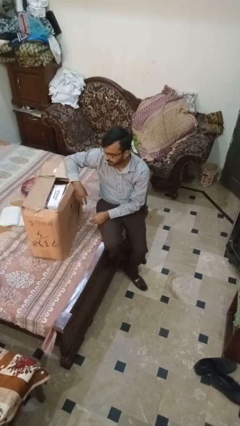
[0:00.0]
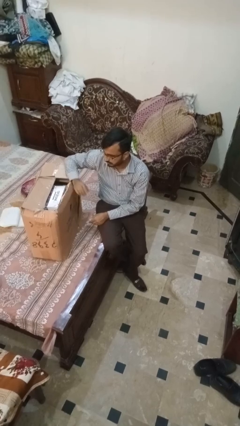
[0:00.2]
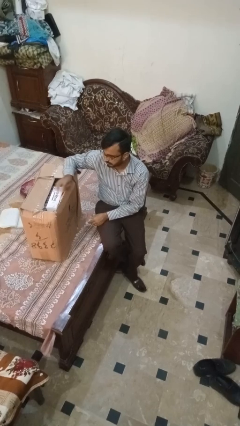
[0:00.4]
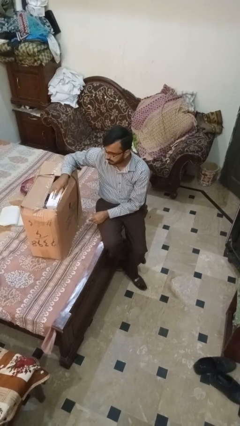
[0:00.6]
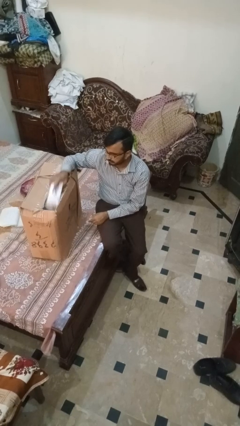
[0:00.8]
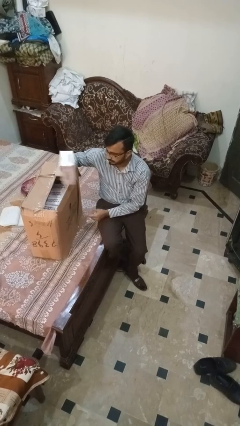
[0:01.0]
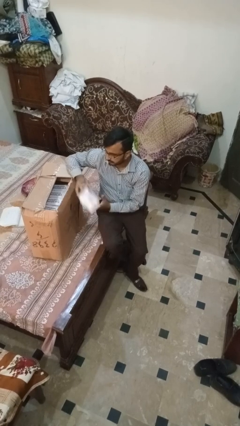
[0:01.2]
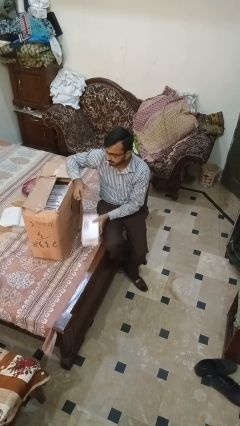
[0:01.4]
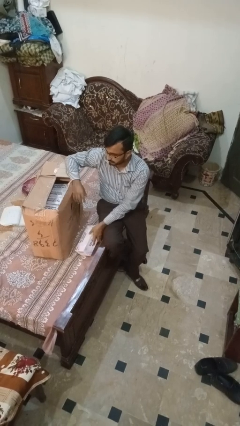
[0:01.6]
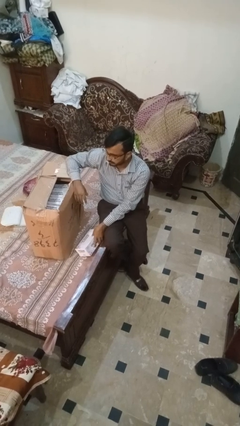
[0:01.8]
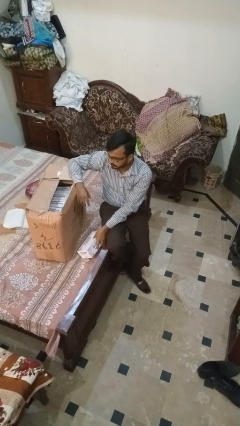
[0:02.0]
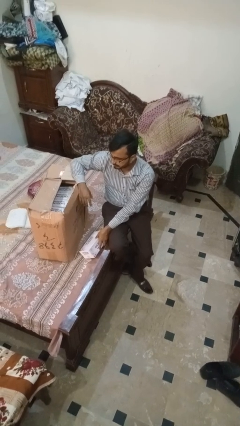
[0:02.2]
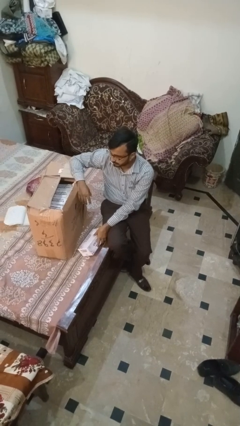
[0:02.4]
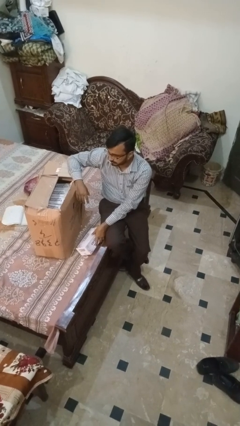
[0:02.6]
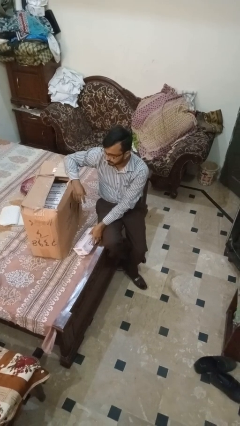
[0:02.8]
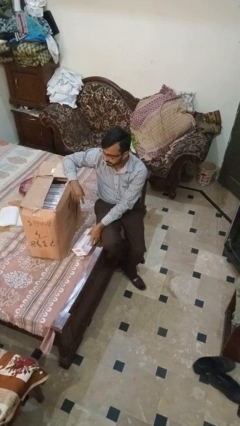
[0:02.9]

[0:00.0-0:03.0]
person takes object from box

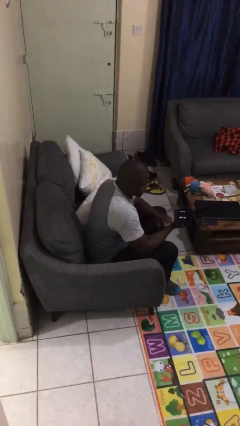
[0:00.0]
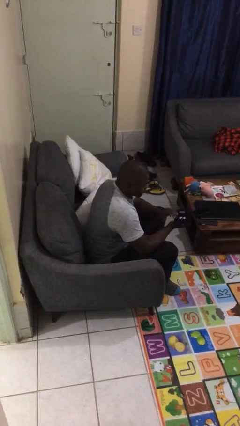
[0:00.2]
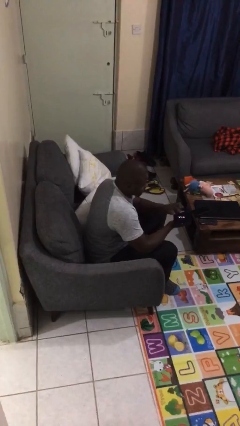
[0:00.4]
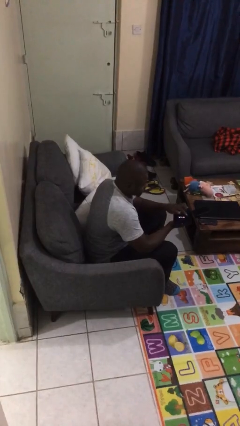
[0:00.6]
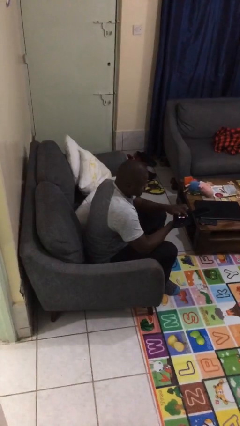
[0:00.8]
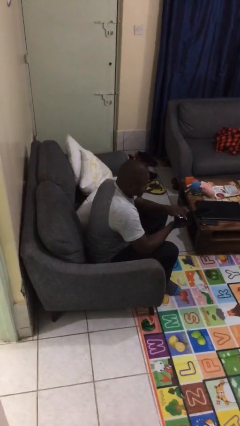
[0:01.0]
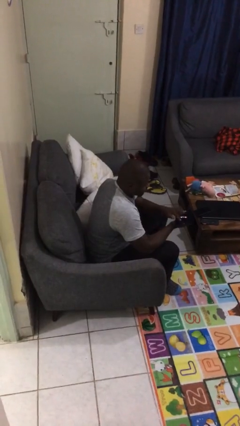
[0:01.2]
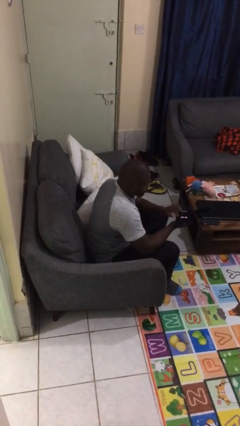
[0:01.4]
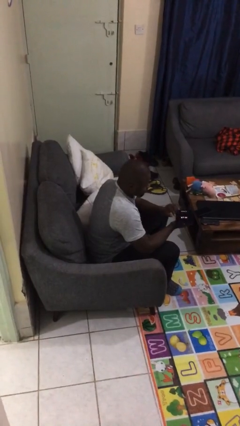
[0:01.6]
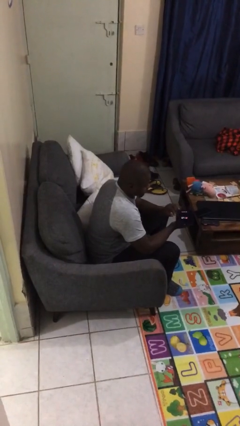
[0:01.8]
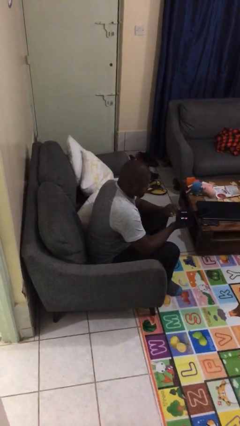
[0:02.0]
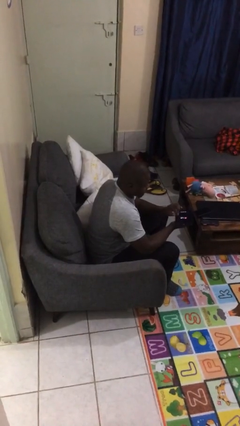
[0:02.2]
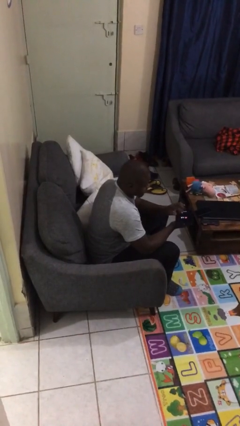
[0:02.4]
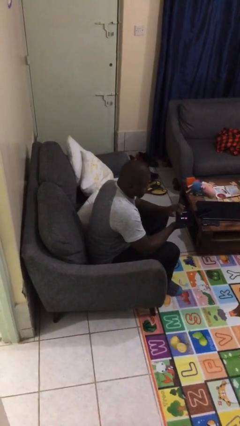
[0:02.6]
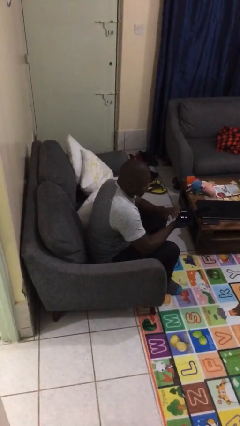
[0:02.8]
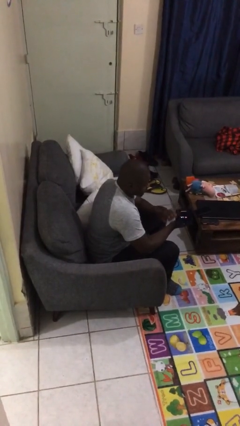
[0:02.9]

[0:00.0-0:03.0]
person interacts with tablet

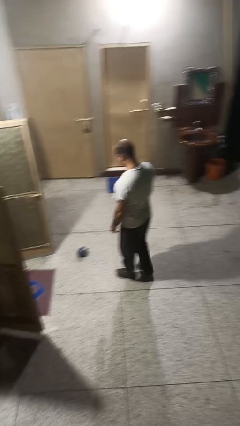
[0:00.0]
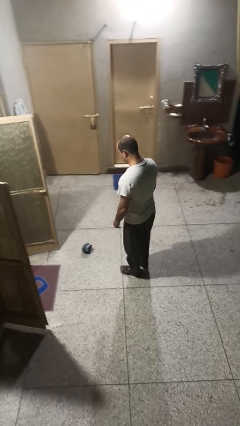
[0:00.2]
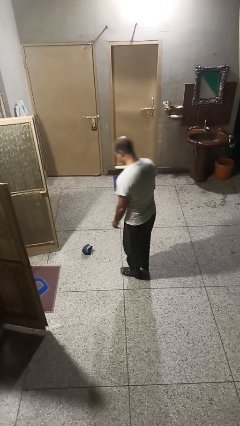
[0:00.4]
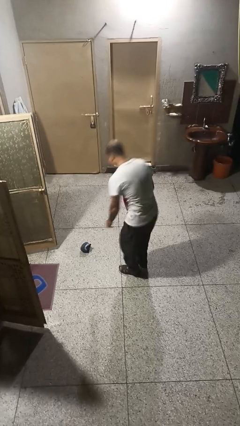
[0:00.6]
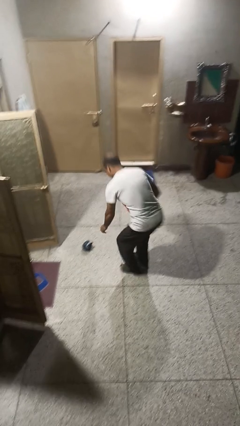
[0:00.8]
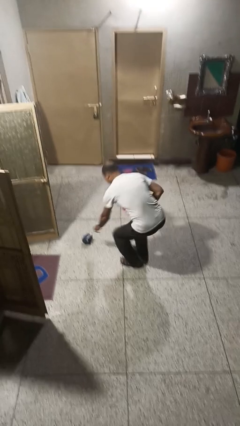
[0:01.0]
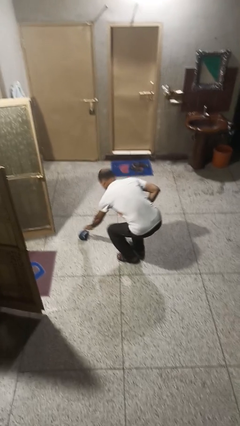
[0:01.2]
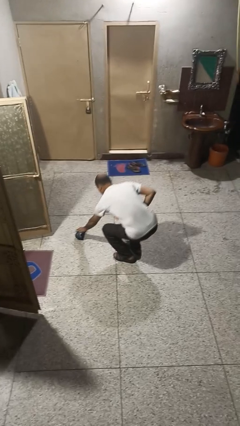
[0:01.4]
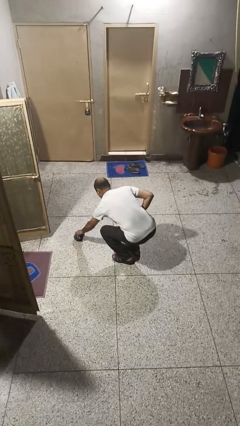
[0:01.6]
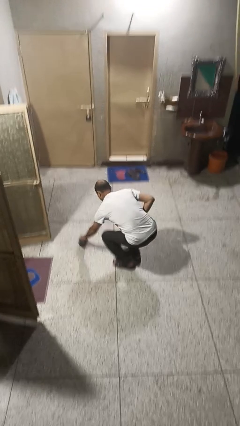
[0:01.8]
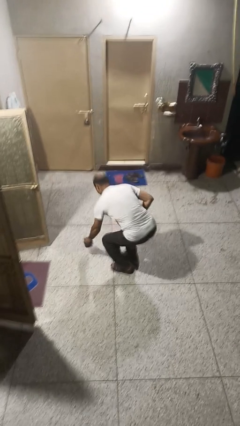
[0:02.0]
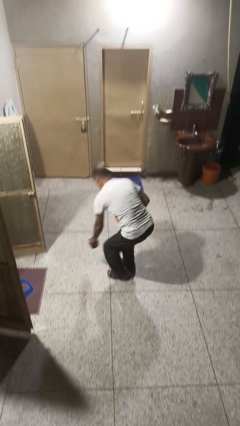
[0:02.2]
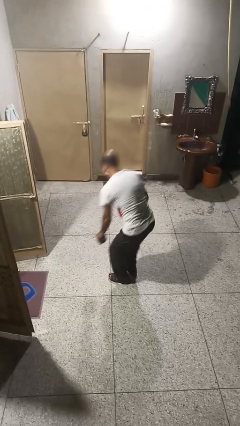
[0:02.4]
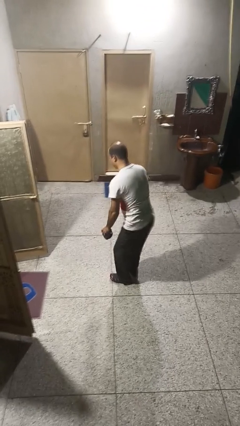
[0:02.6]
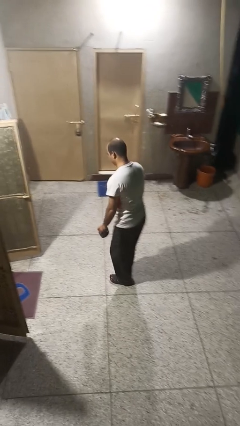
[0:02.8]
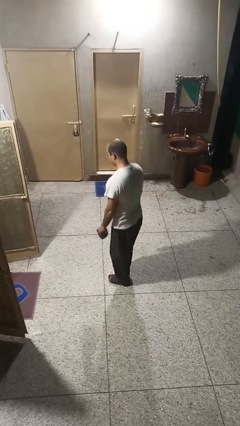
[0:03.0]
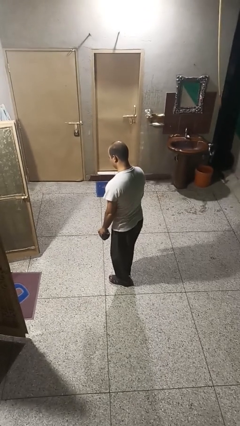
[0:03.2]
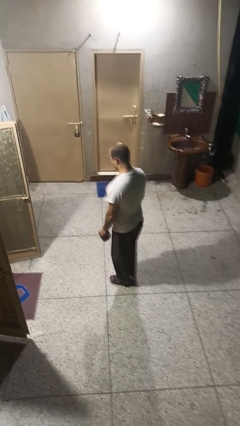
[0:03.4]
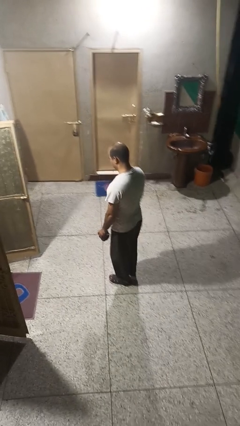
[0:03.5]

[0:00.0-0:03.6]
person picks up object from floor

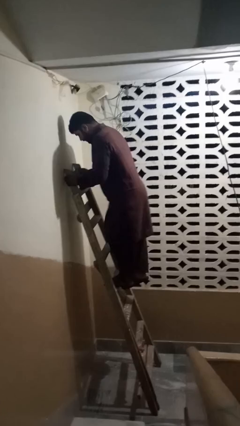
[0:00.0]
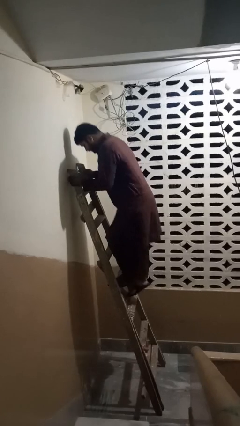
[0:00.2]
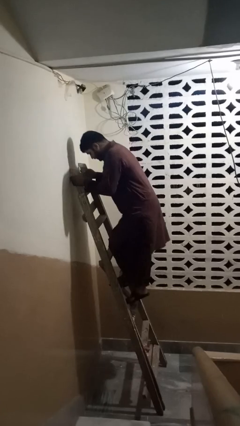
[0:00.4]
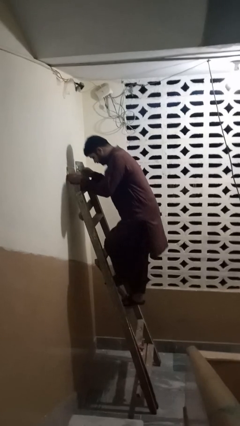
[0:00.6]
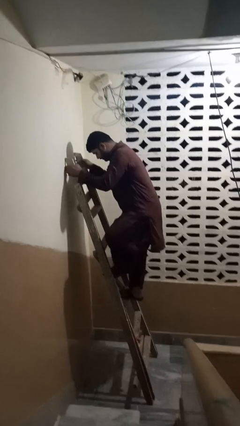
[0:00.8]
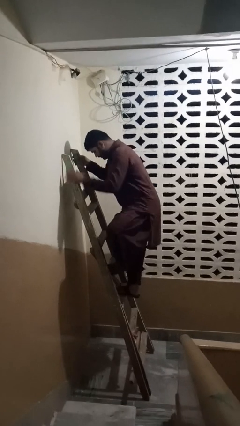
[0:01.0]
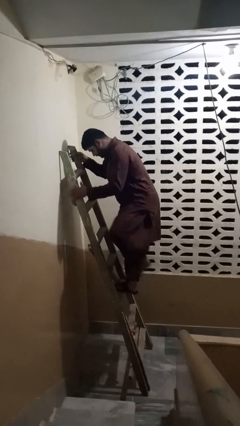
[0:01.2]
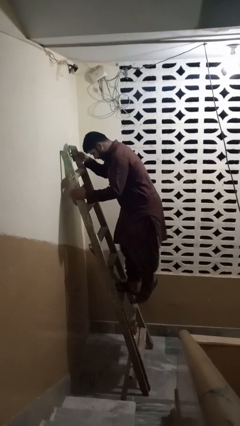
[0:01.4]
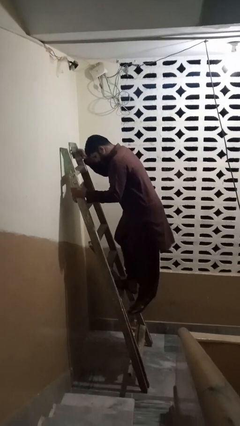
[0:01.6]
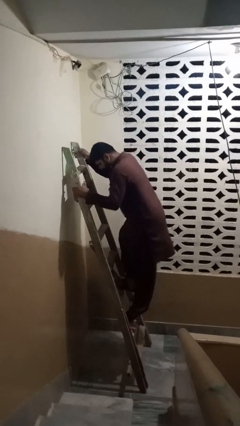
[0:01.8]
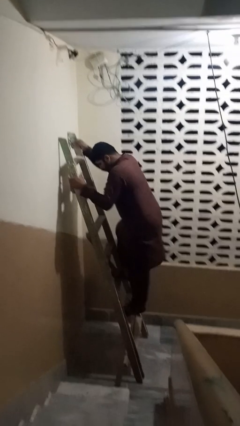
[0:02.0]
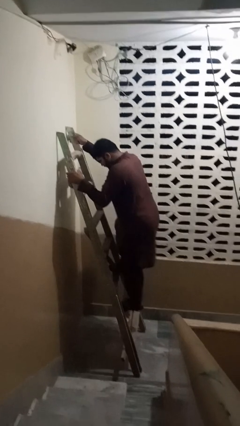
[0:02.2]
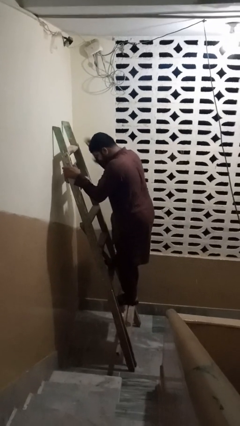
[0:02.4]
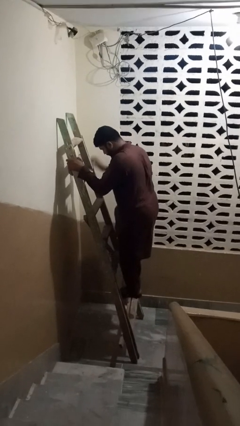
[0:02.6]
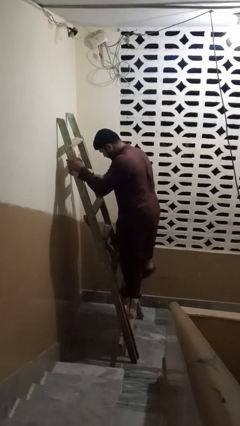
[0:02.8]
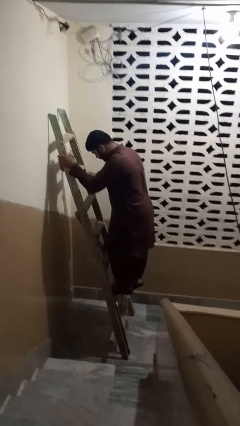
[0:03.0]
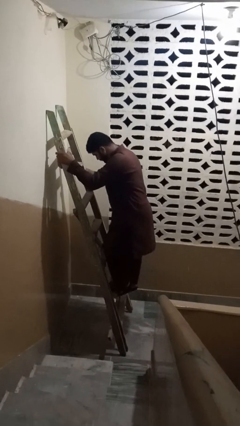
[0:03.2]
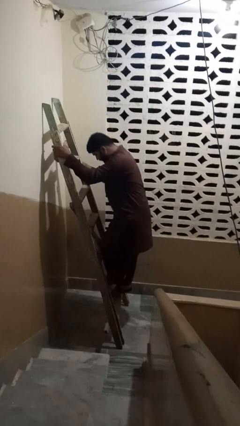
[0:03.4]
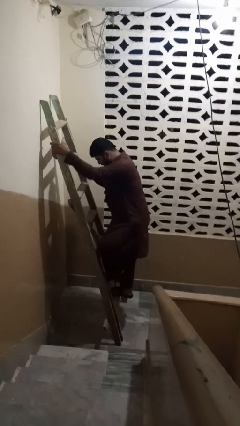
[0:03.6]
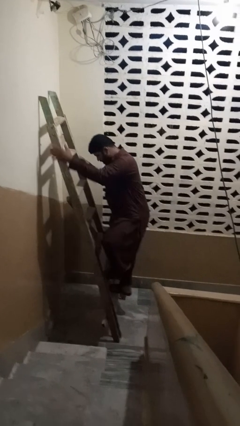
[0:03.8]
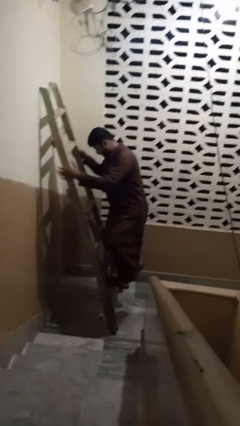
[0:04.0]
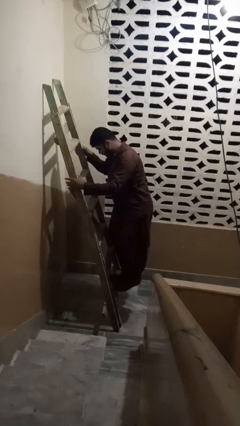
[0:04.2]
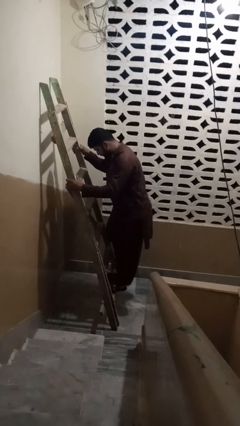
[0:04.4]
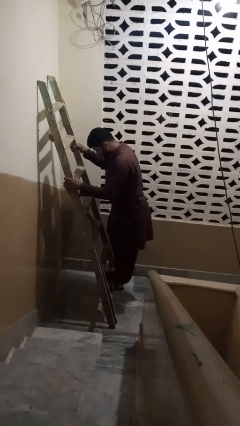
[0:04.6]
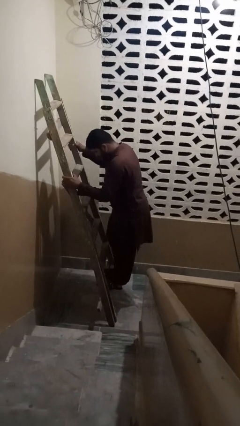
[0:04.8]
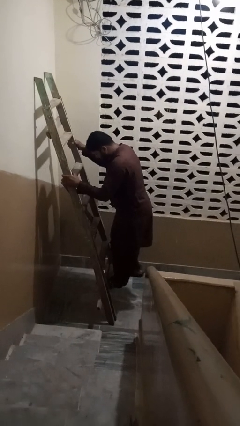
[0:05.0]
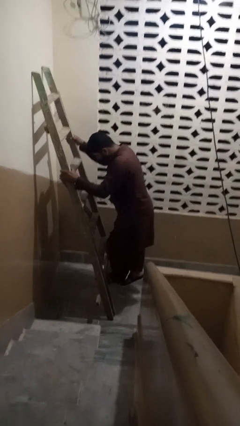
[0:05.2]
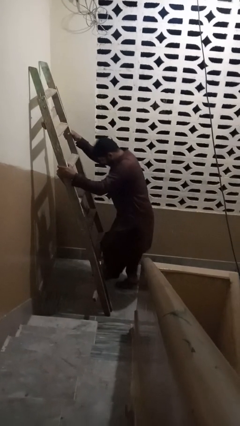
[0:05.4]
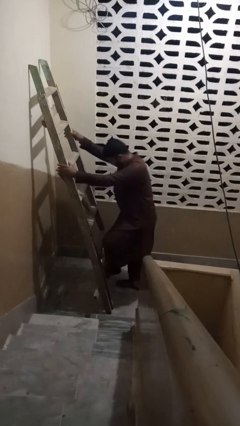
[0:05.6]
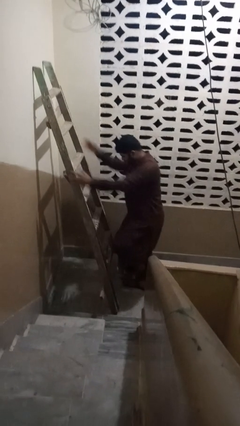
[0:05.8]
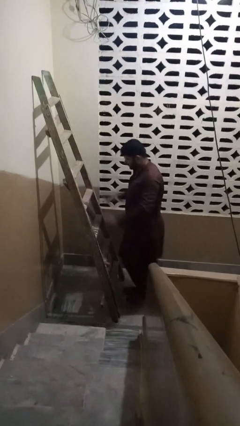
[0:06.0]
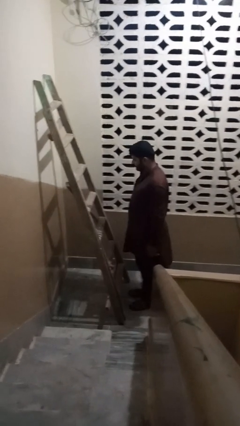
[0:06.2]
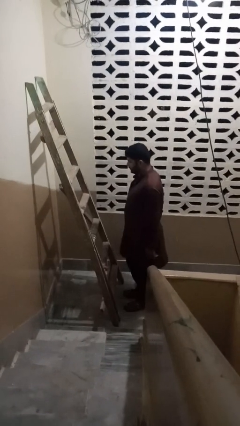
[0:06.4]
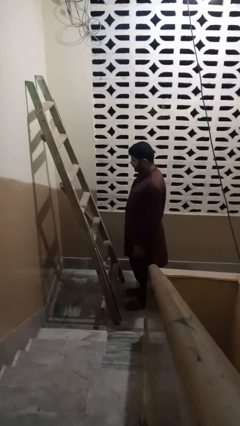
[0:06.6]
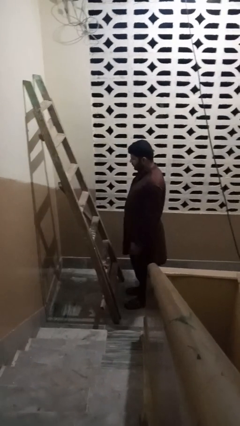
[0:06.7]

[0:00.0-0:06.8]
person climbs down ladder

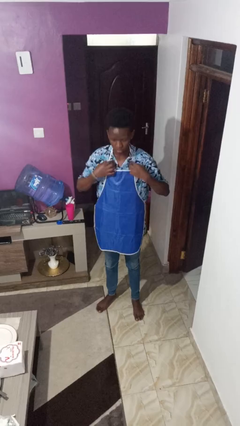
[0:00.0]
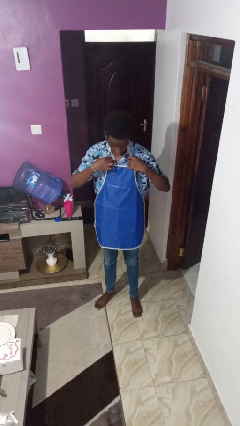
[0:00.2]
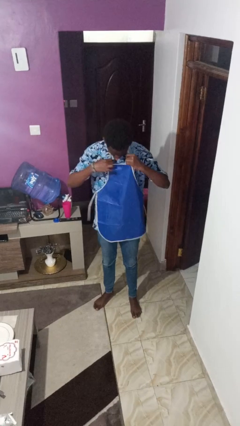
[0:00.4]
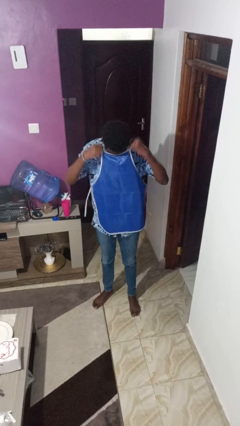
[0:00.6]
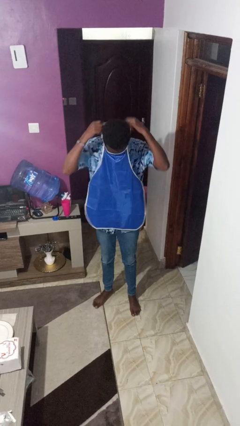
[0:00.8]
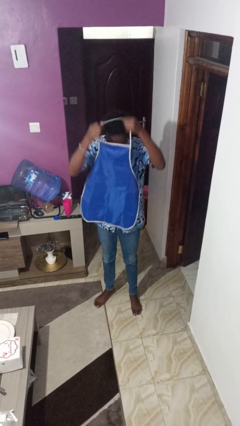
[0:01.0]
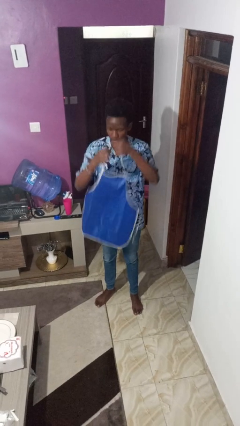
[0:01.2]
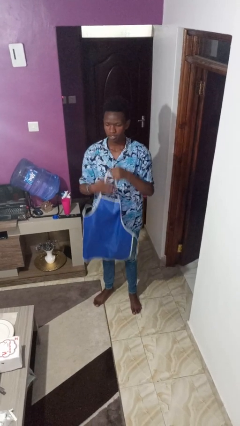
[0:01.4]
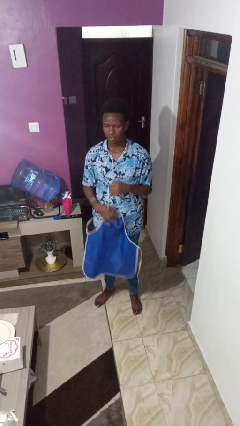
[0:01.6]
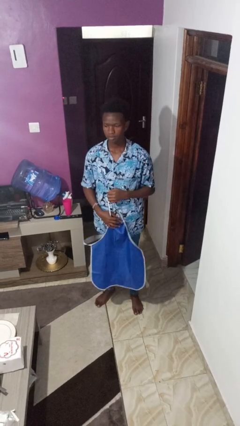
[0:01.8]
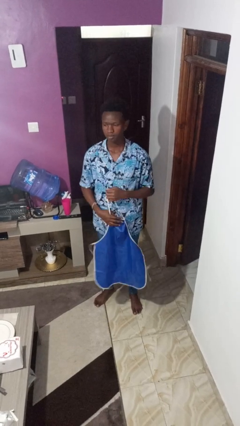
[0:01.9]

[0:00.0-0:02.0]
person takes off apron
